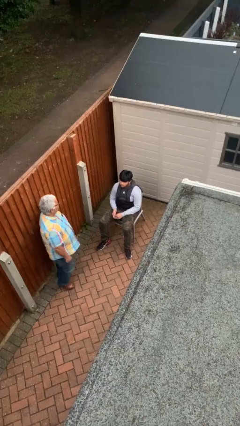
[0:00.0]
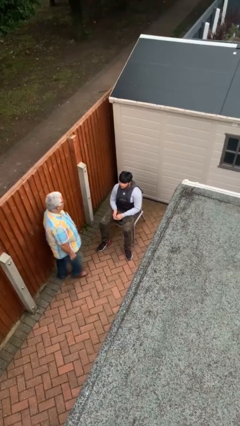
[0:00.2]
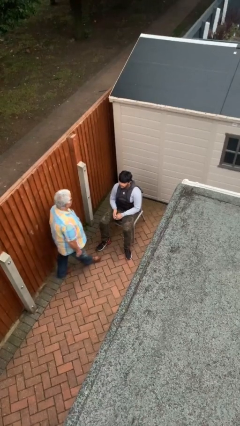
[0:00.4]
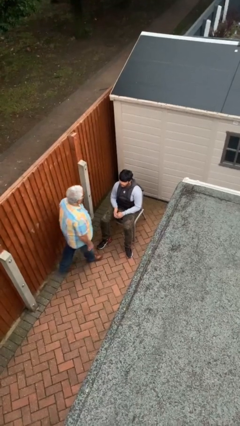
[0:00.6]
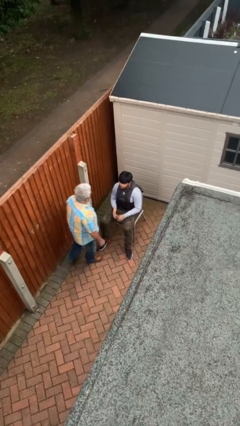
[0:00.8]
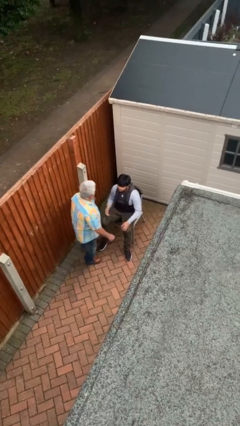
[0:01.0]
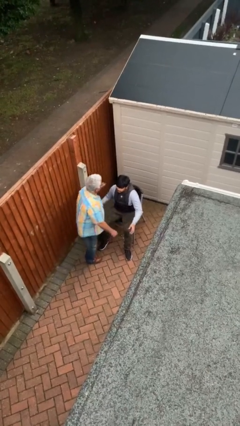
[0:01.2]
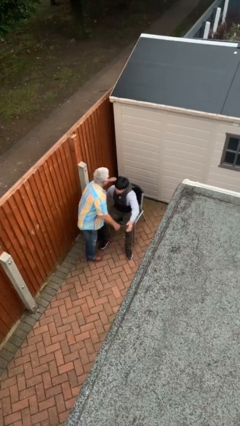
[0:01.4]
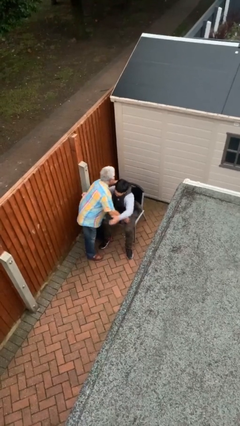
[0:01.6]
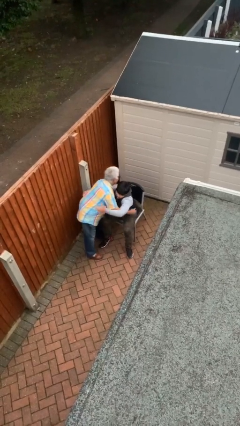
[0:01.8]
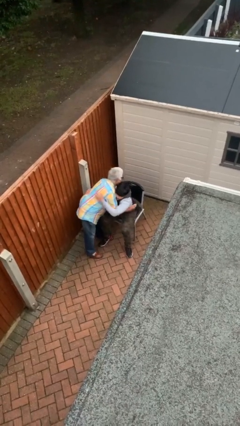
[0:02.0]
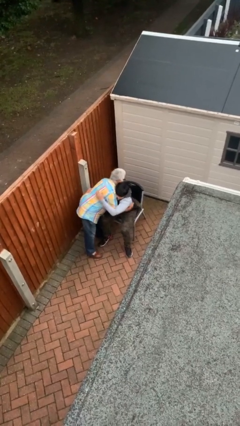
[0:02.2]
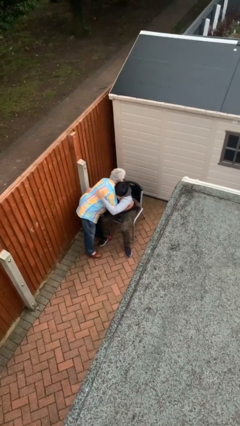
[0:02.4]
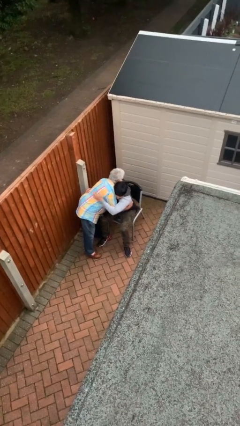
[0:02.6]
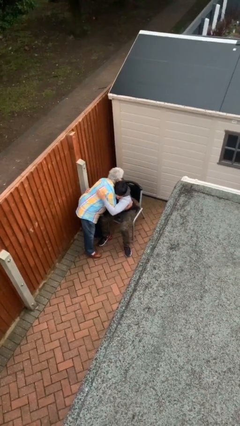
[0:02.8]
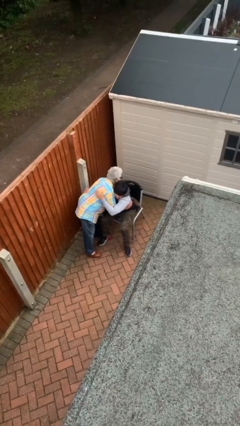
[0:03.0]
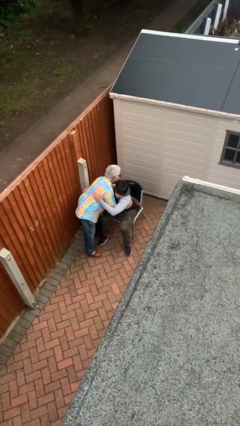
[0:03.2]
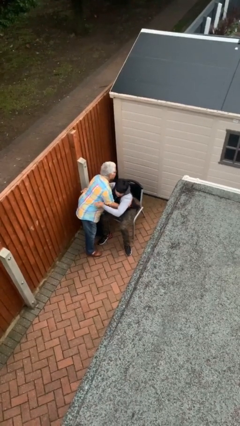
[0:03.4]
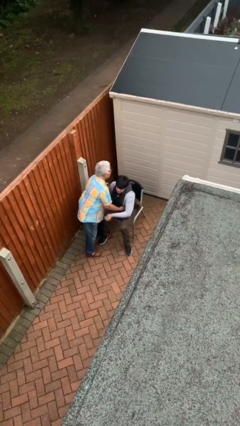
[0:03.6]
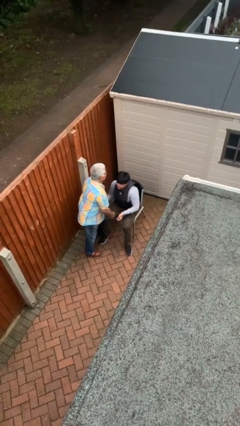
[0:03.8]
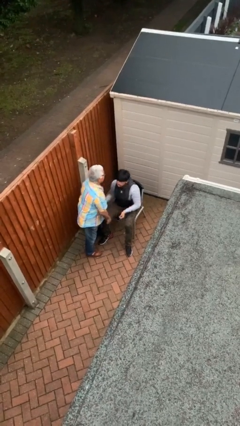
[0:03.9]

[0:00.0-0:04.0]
person embraces person

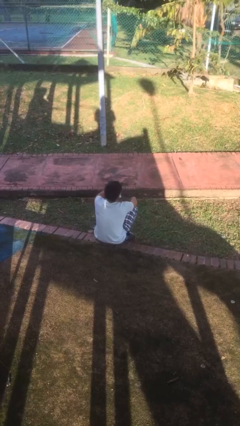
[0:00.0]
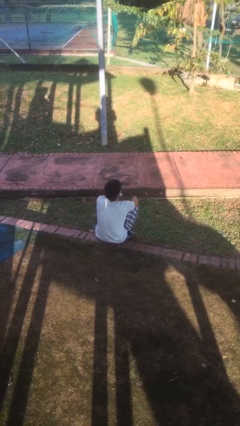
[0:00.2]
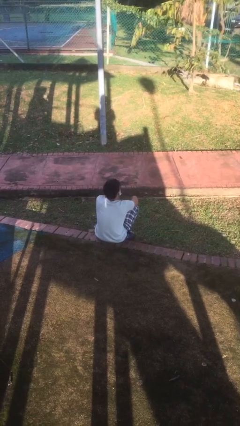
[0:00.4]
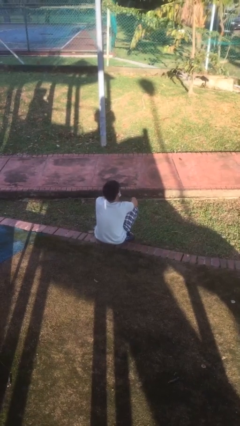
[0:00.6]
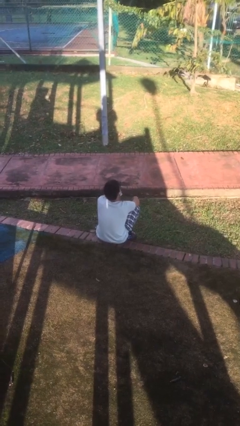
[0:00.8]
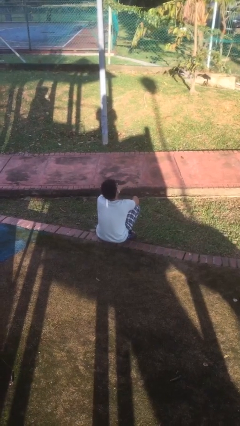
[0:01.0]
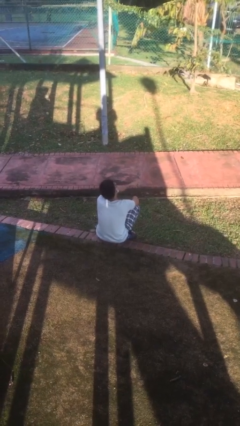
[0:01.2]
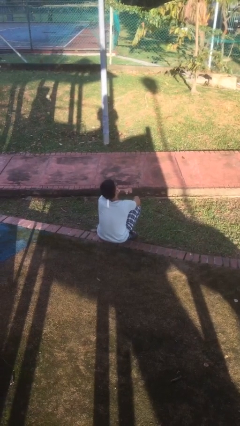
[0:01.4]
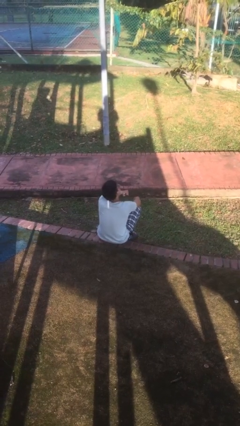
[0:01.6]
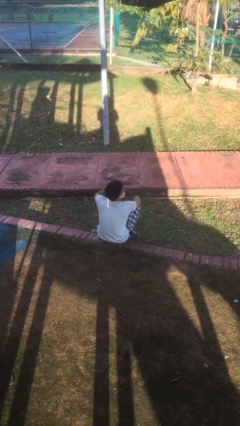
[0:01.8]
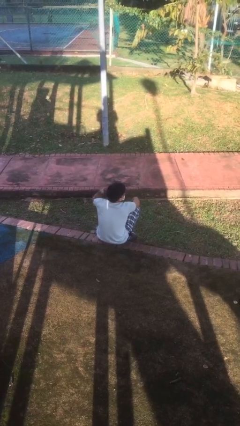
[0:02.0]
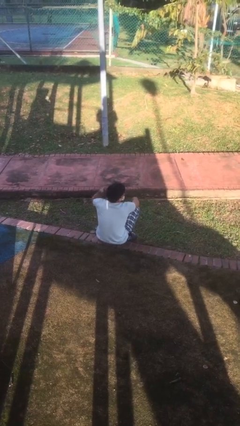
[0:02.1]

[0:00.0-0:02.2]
person gestures cut

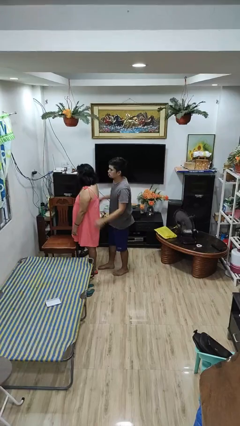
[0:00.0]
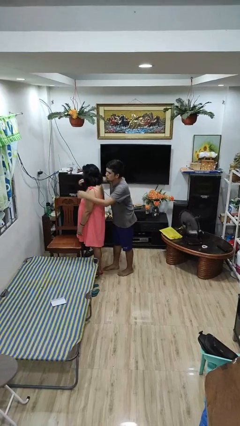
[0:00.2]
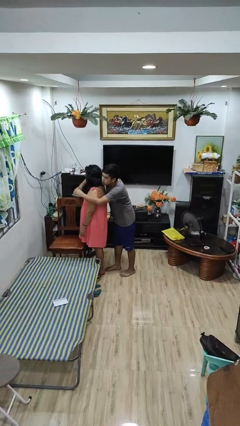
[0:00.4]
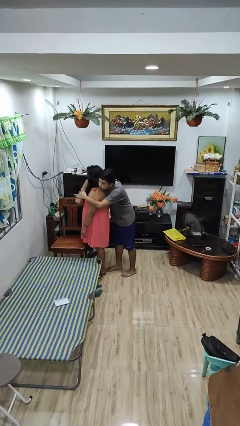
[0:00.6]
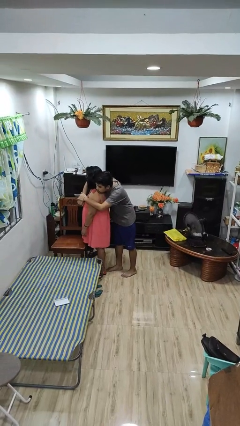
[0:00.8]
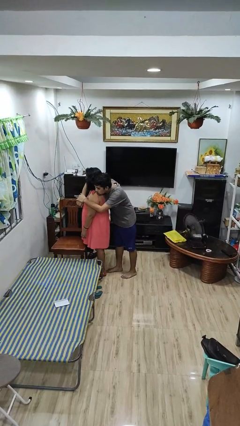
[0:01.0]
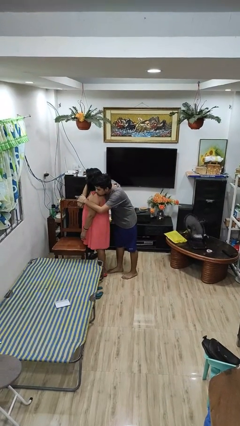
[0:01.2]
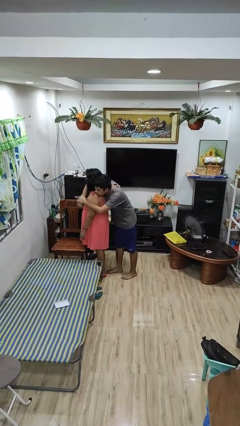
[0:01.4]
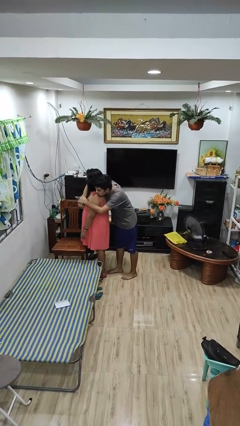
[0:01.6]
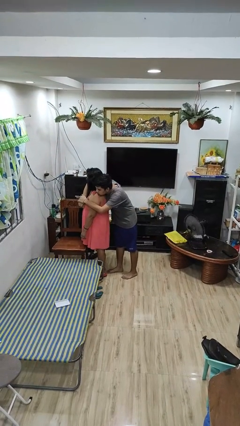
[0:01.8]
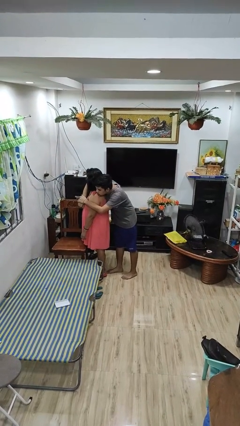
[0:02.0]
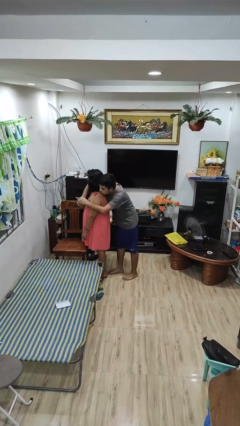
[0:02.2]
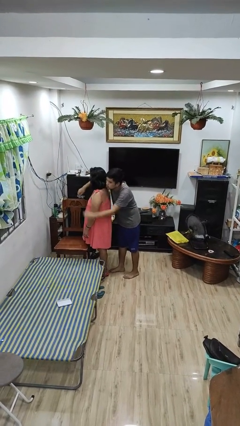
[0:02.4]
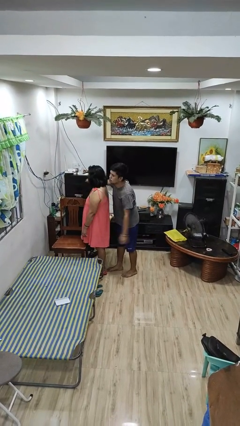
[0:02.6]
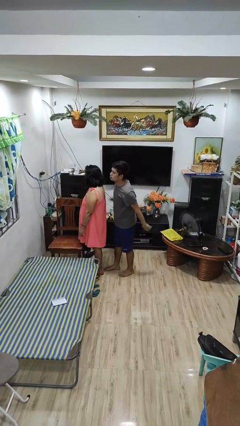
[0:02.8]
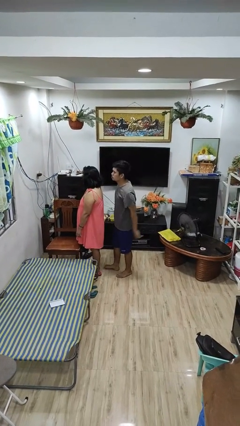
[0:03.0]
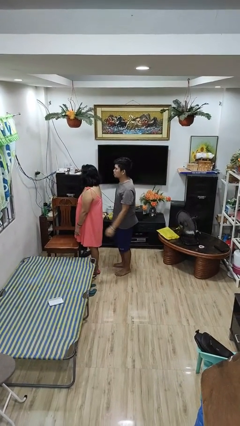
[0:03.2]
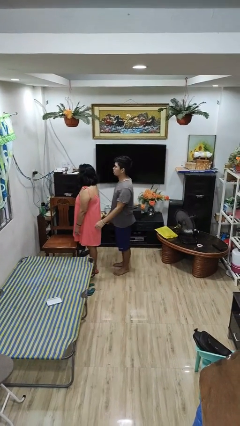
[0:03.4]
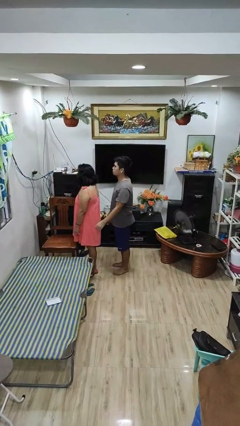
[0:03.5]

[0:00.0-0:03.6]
person hugs person from behind

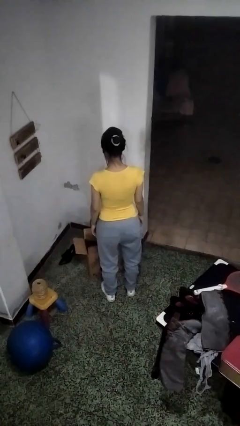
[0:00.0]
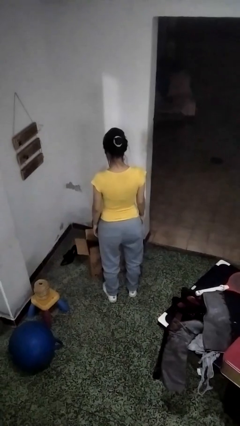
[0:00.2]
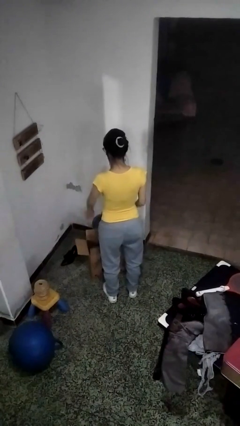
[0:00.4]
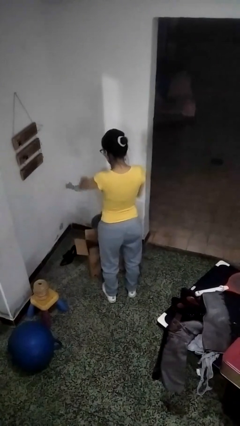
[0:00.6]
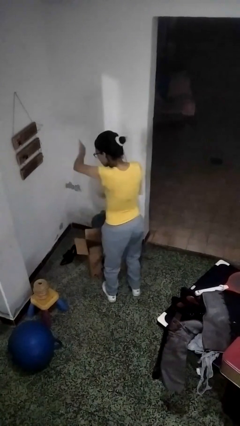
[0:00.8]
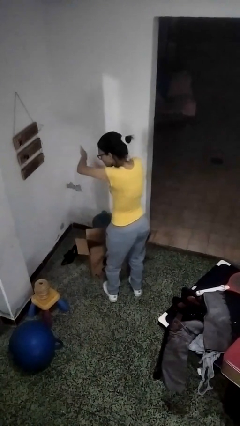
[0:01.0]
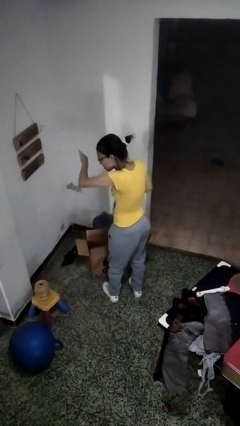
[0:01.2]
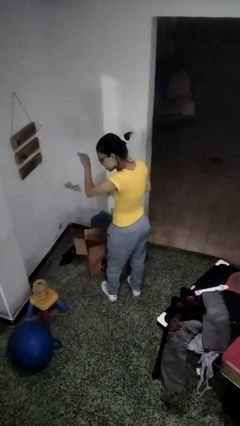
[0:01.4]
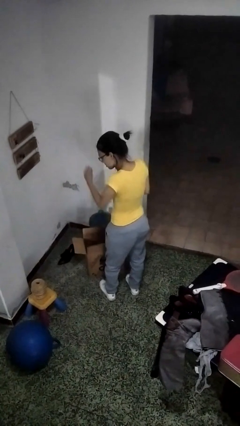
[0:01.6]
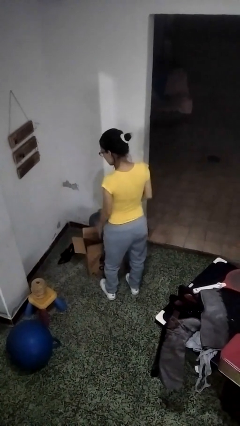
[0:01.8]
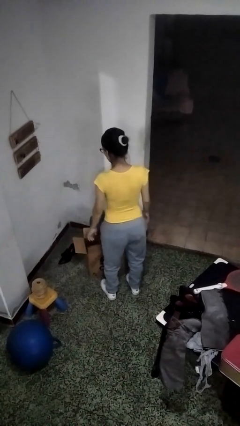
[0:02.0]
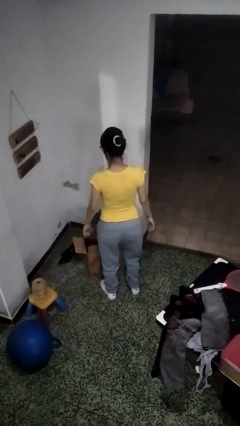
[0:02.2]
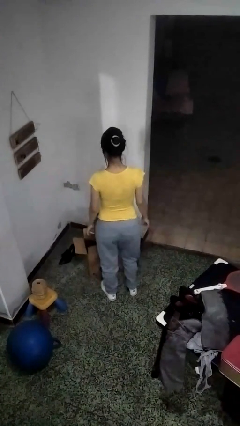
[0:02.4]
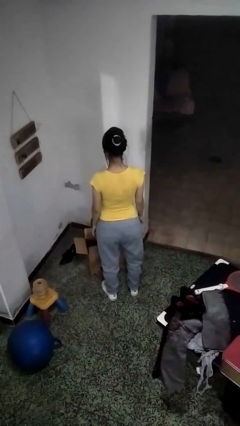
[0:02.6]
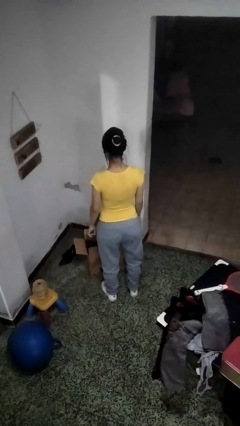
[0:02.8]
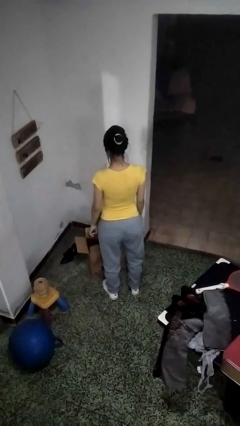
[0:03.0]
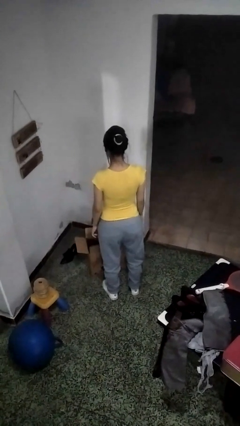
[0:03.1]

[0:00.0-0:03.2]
person swats bug

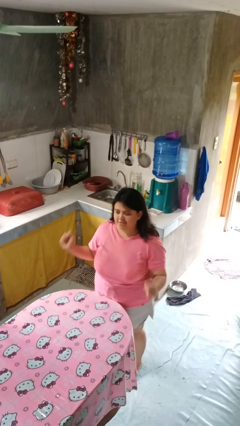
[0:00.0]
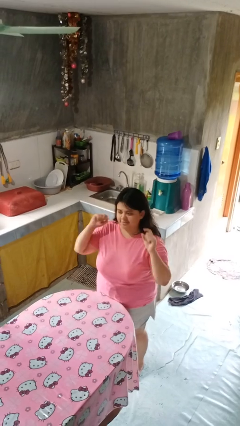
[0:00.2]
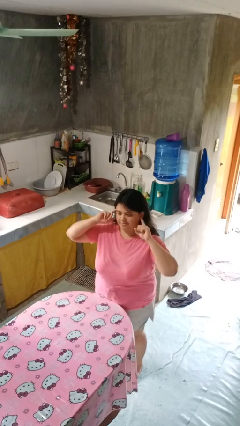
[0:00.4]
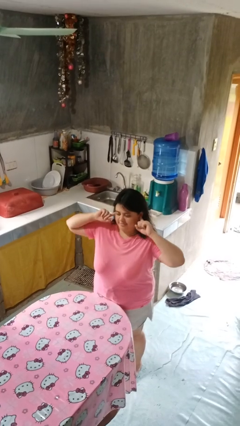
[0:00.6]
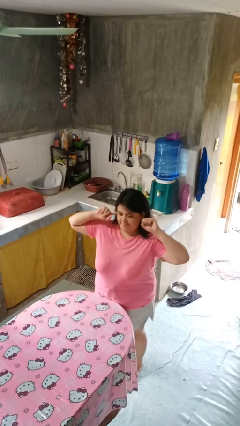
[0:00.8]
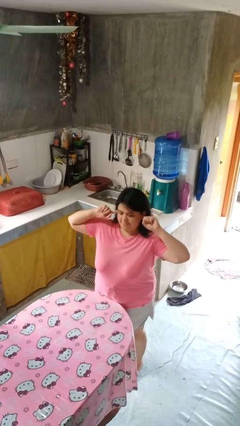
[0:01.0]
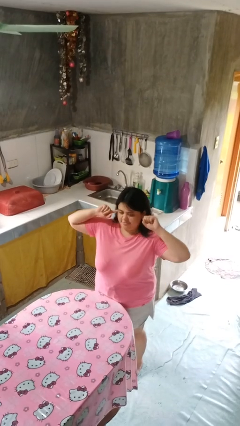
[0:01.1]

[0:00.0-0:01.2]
person puts fingers in ear

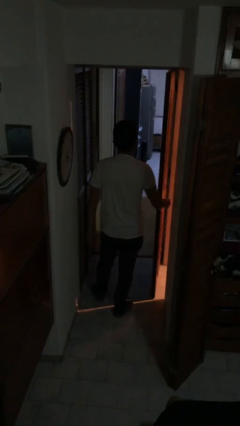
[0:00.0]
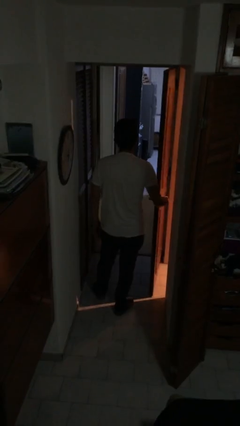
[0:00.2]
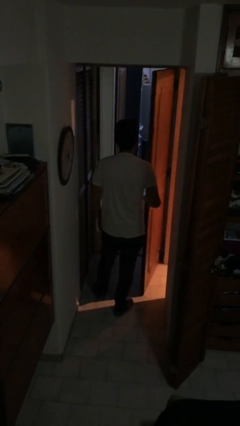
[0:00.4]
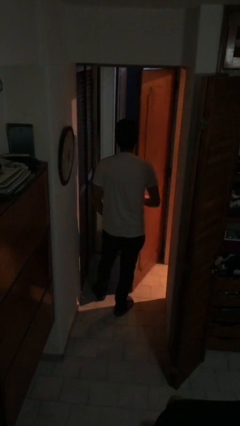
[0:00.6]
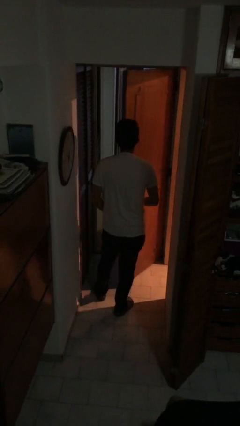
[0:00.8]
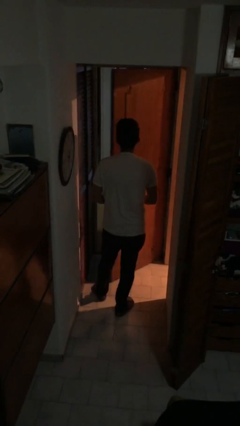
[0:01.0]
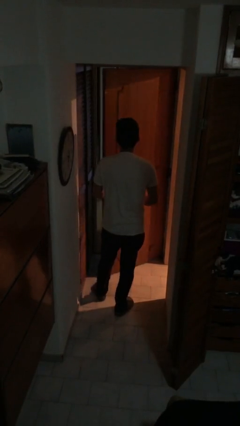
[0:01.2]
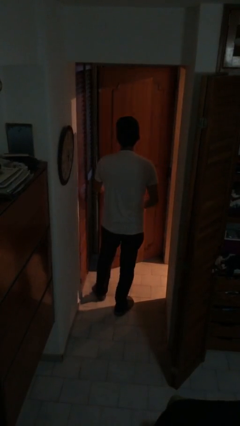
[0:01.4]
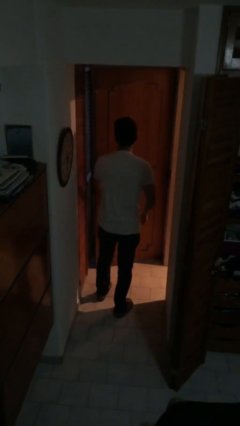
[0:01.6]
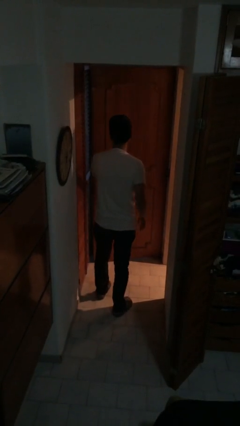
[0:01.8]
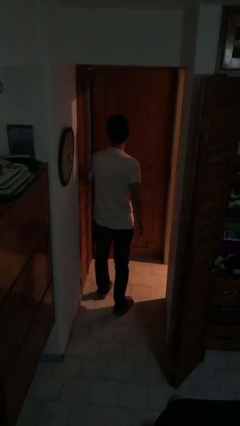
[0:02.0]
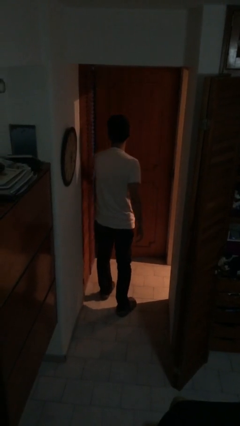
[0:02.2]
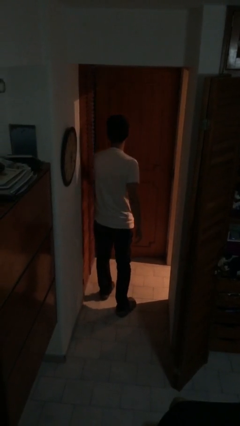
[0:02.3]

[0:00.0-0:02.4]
person closes facility door

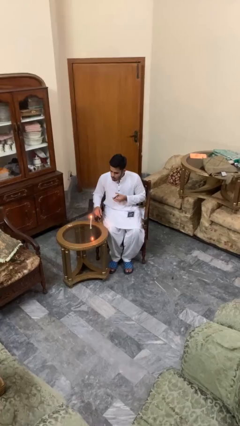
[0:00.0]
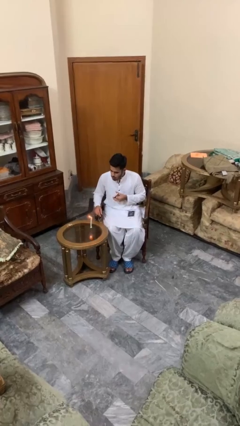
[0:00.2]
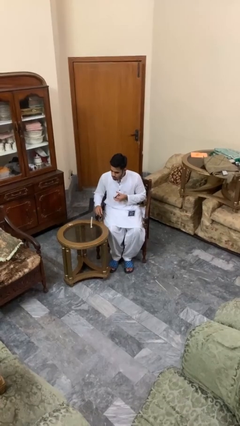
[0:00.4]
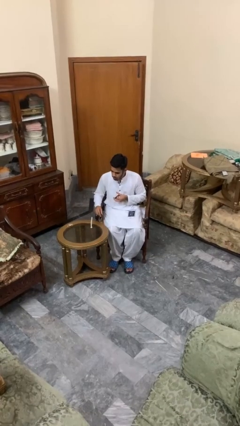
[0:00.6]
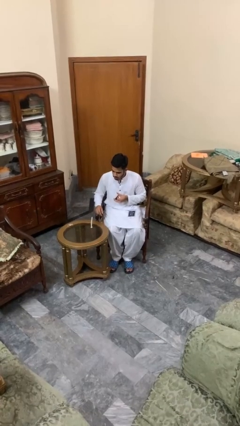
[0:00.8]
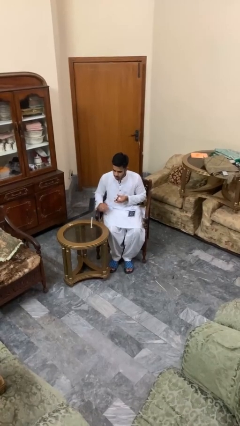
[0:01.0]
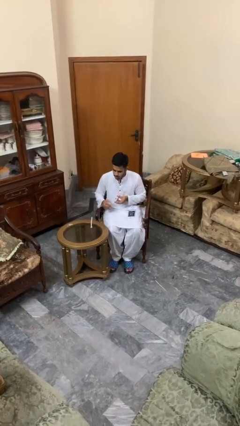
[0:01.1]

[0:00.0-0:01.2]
person extinguishes candle
